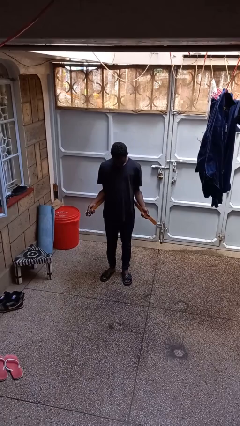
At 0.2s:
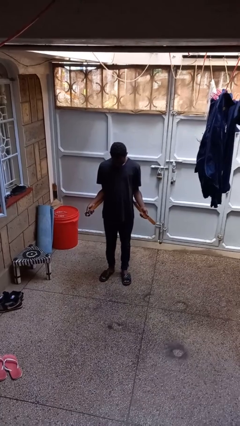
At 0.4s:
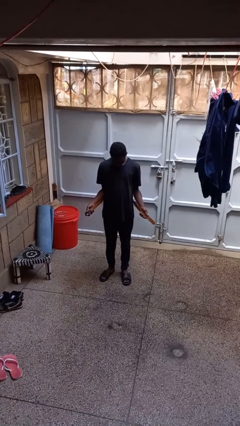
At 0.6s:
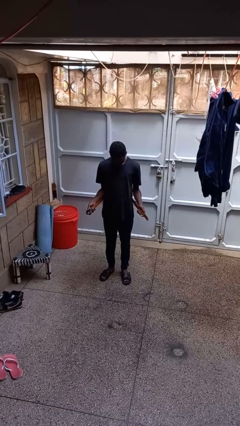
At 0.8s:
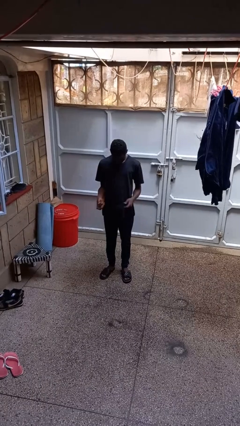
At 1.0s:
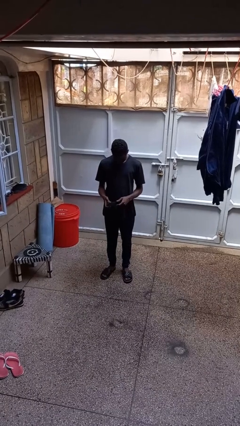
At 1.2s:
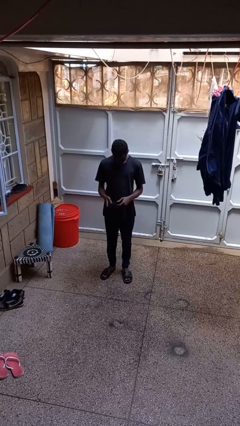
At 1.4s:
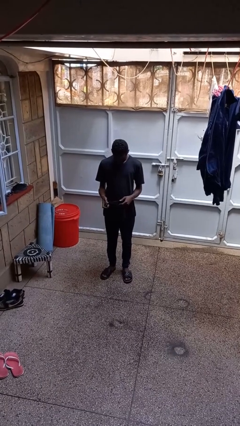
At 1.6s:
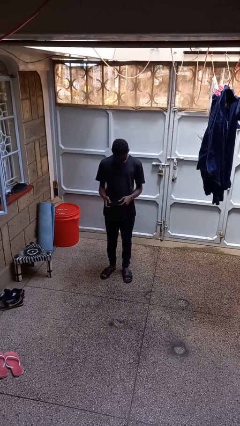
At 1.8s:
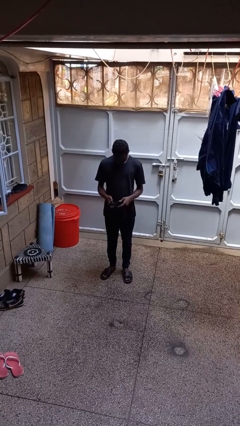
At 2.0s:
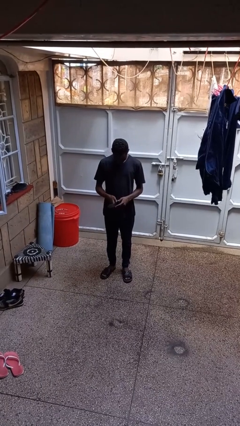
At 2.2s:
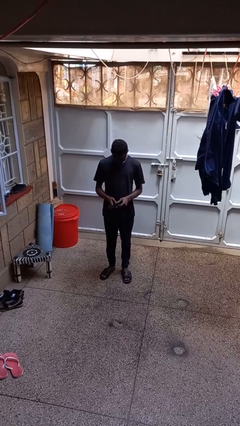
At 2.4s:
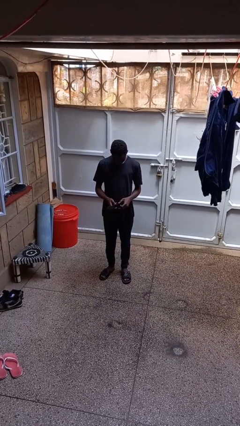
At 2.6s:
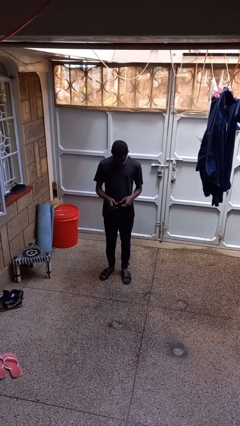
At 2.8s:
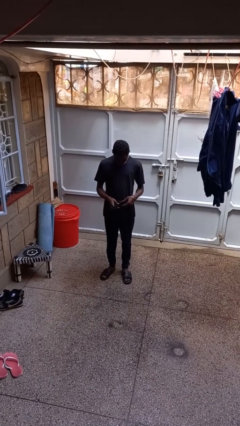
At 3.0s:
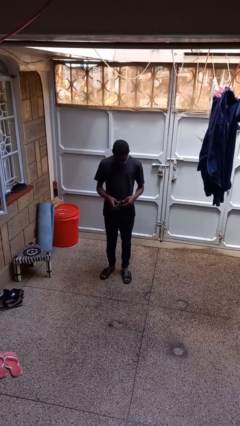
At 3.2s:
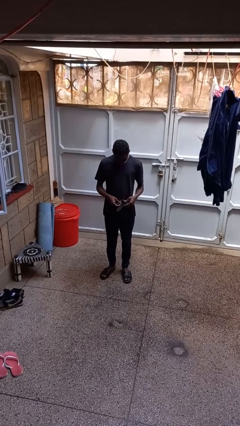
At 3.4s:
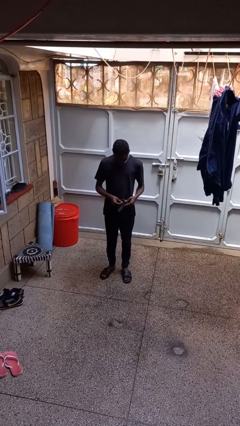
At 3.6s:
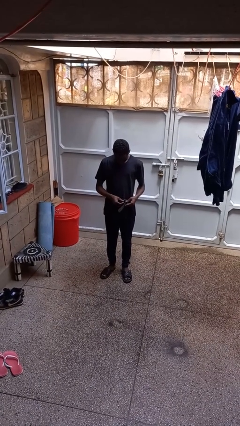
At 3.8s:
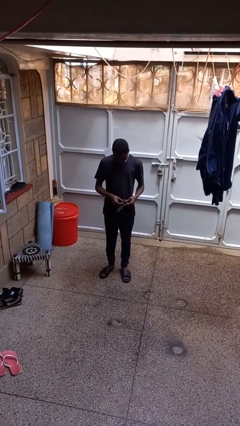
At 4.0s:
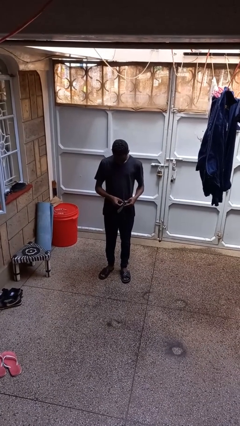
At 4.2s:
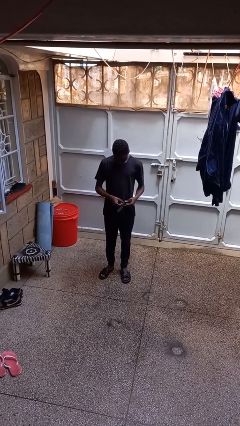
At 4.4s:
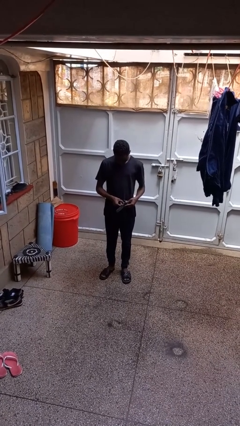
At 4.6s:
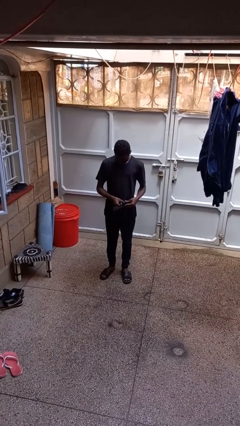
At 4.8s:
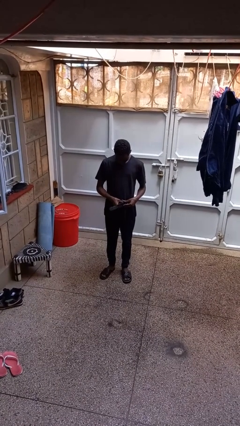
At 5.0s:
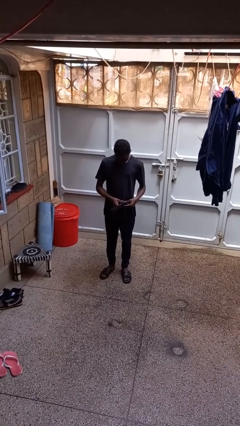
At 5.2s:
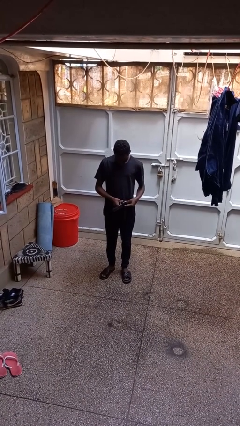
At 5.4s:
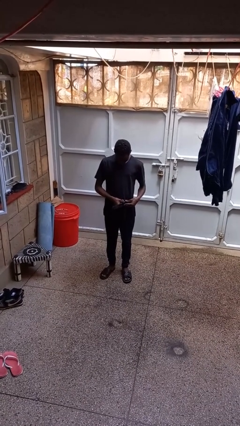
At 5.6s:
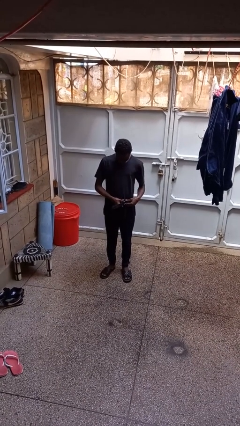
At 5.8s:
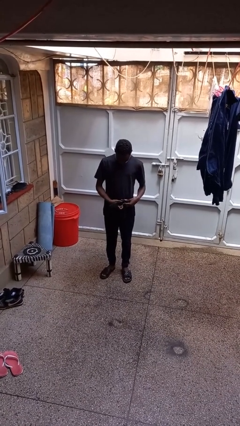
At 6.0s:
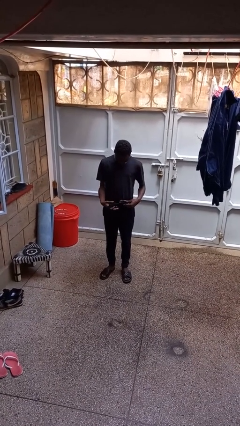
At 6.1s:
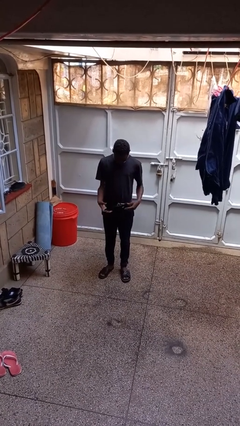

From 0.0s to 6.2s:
person puts on belt

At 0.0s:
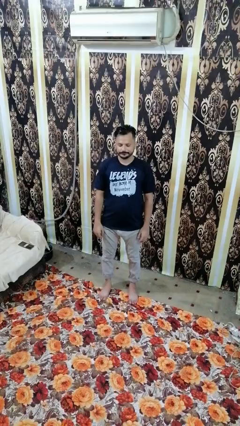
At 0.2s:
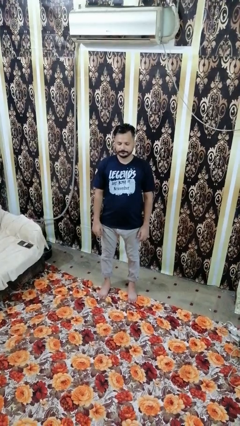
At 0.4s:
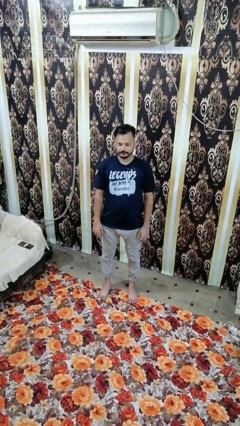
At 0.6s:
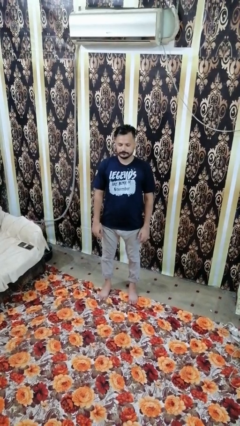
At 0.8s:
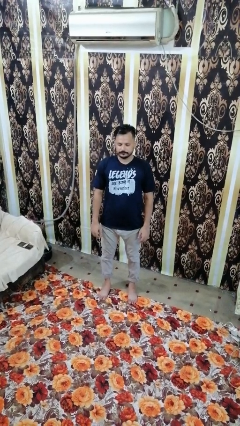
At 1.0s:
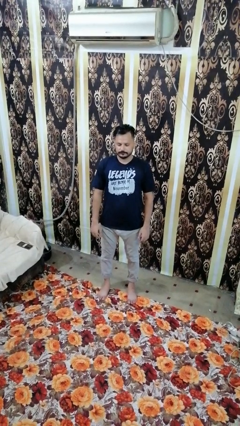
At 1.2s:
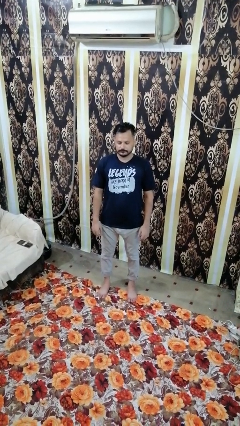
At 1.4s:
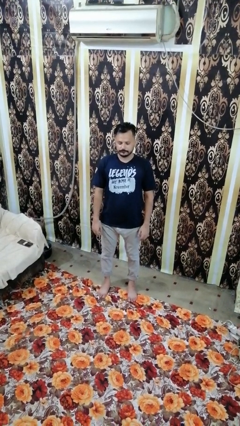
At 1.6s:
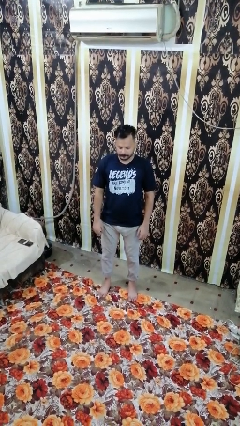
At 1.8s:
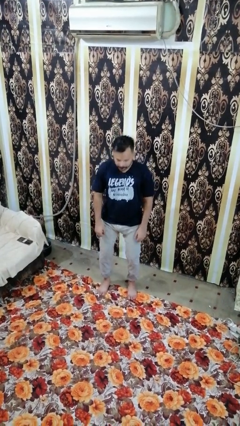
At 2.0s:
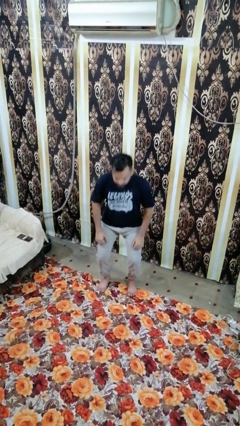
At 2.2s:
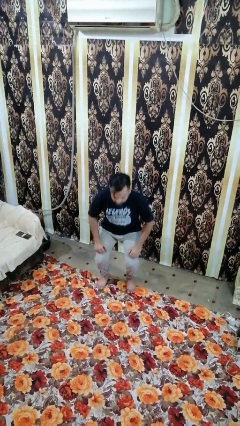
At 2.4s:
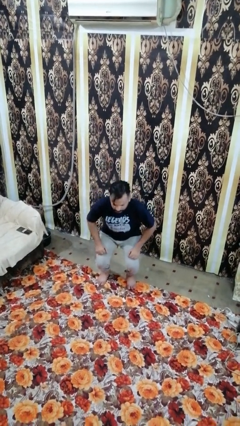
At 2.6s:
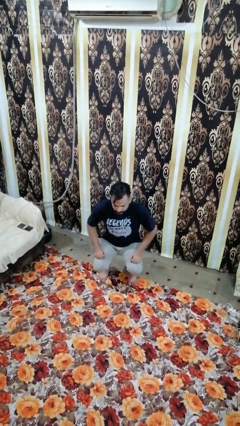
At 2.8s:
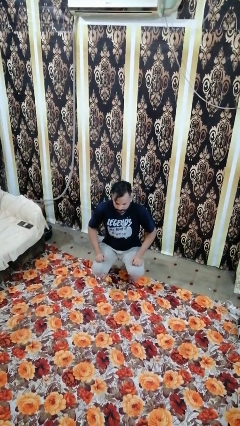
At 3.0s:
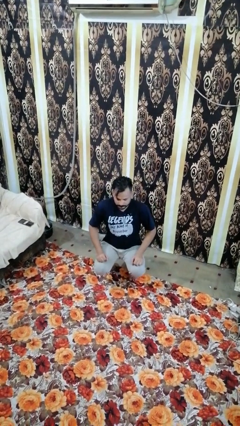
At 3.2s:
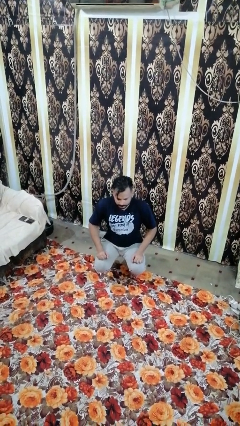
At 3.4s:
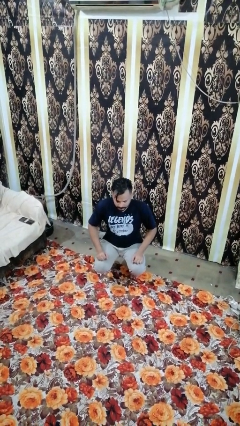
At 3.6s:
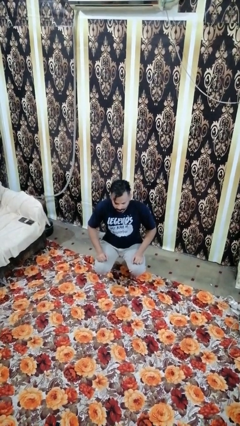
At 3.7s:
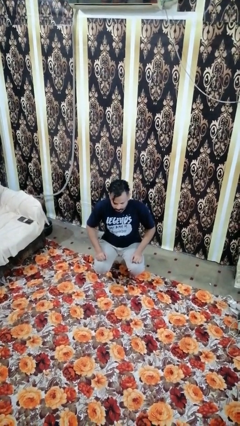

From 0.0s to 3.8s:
person squats

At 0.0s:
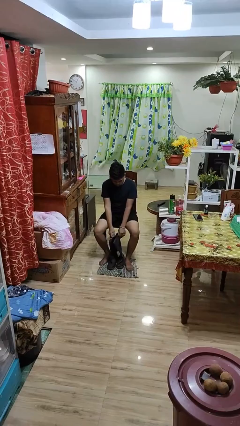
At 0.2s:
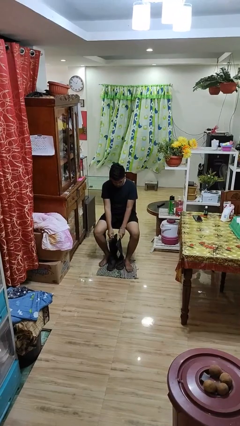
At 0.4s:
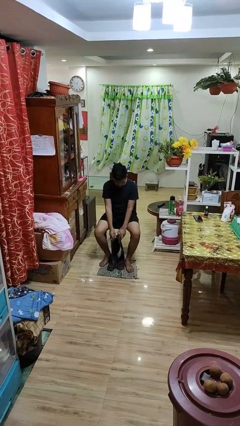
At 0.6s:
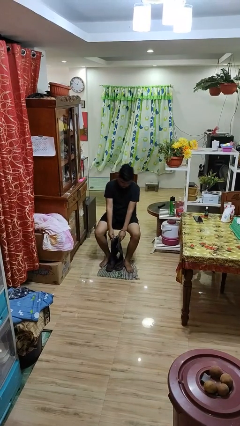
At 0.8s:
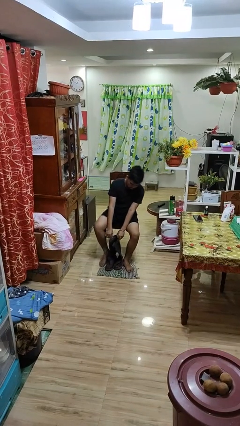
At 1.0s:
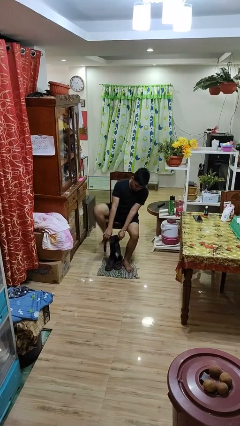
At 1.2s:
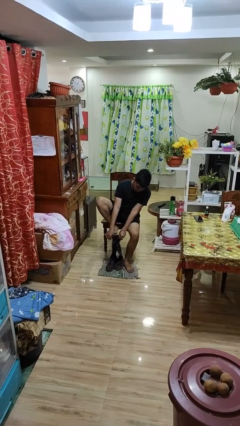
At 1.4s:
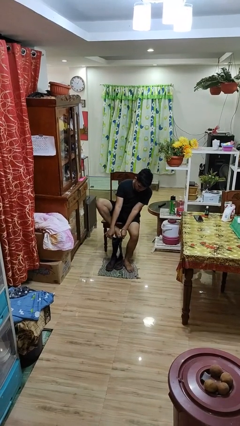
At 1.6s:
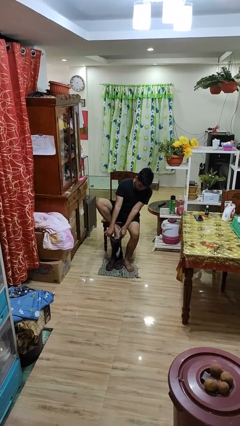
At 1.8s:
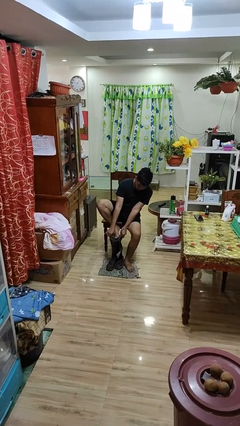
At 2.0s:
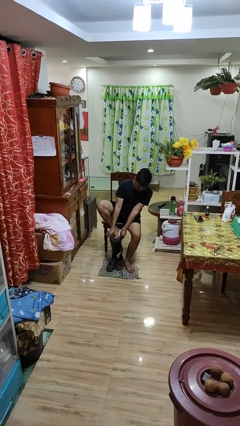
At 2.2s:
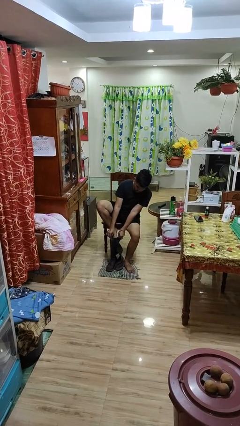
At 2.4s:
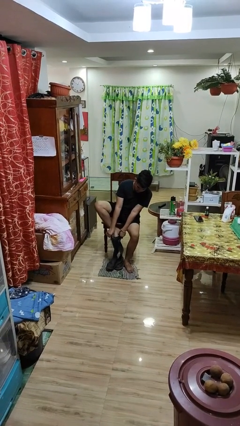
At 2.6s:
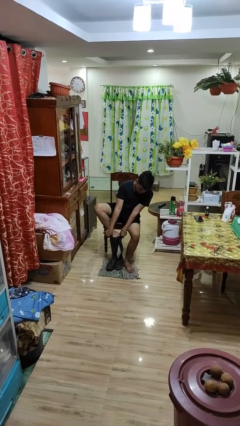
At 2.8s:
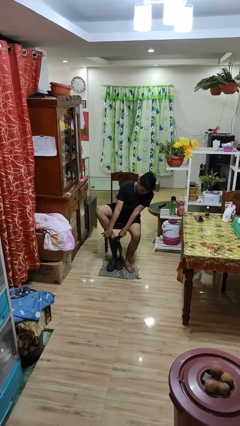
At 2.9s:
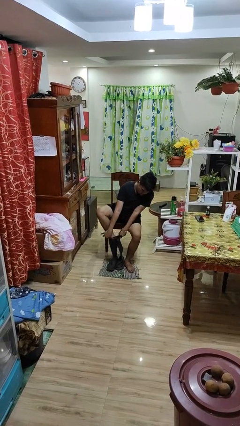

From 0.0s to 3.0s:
person uses television remote

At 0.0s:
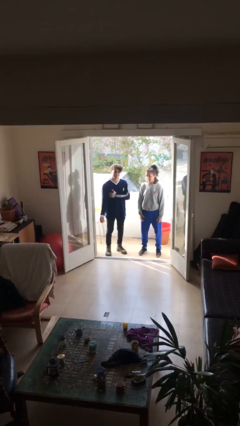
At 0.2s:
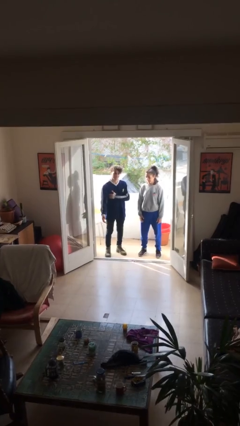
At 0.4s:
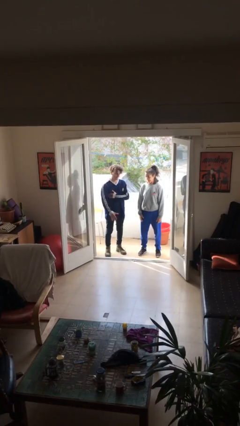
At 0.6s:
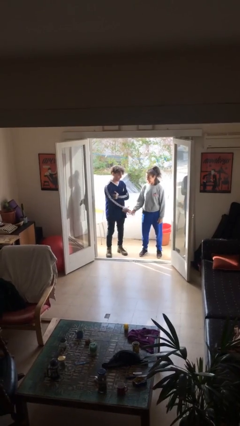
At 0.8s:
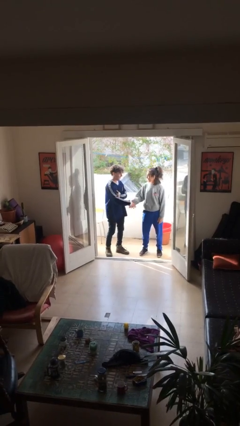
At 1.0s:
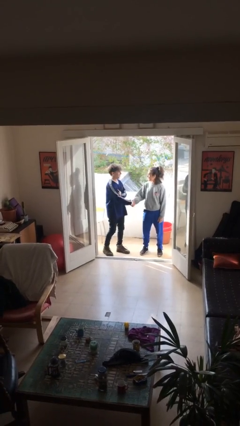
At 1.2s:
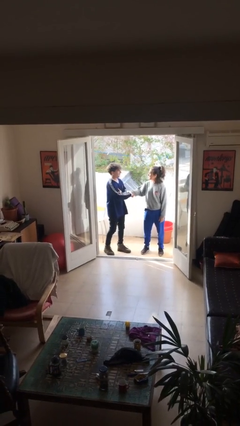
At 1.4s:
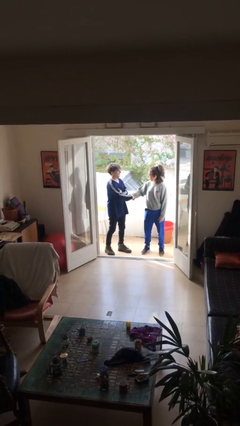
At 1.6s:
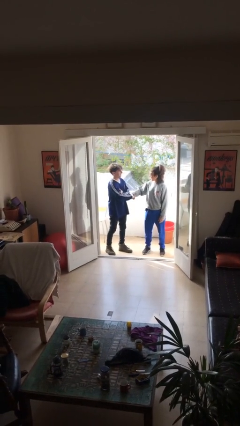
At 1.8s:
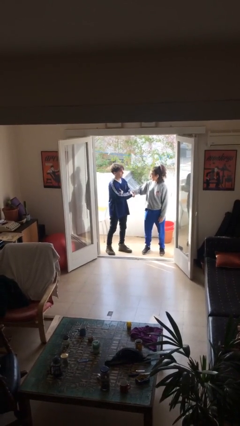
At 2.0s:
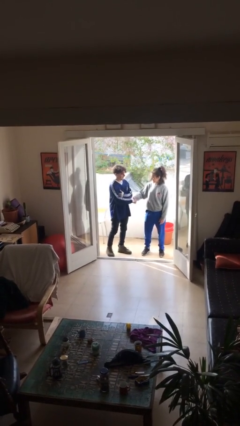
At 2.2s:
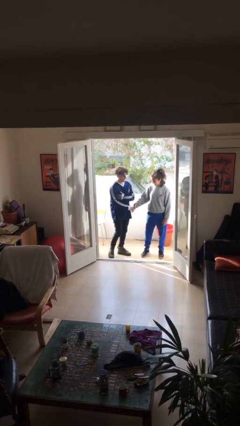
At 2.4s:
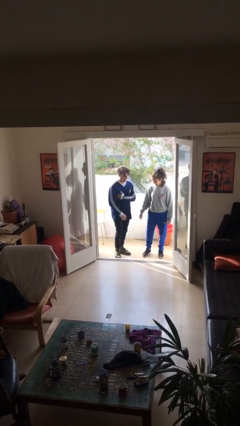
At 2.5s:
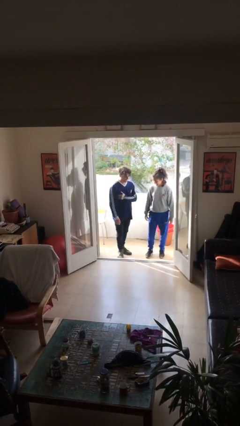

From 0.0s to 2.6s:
person shakes hand

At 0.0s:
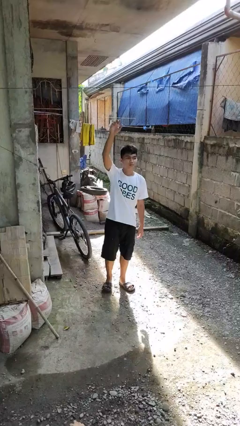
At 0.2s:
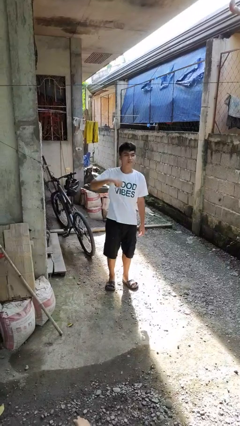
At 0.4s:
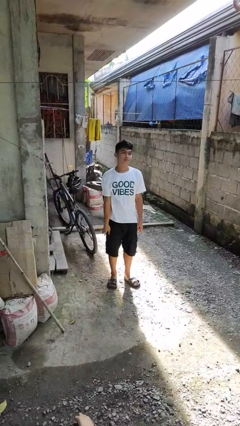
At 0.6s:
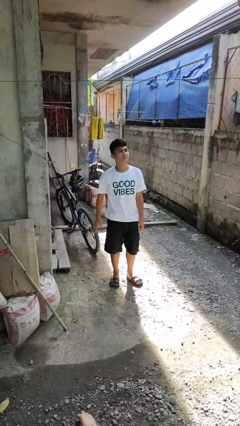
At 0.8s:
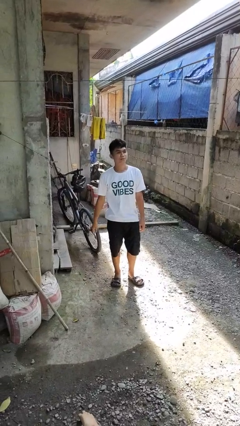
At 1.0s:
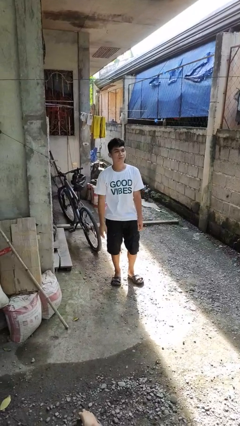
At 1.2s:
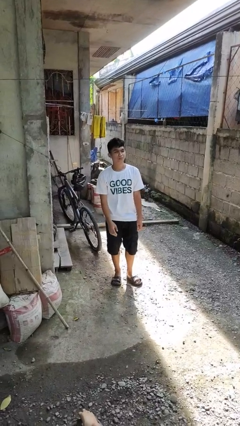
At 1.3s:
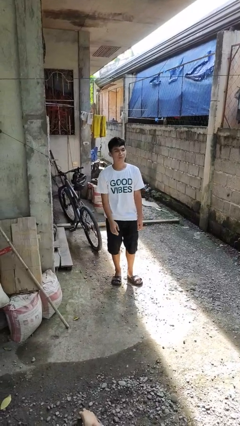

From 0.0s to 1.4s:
person gestures lower hand

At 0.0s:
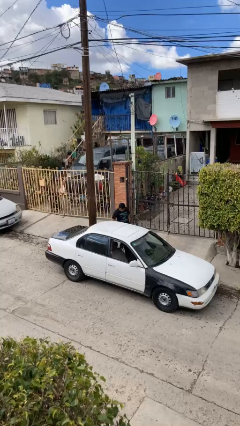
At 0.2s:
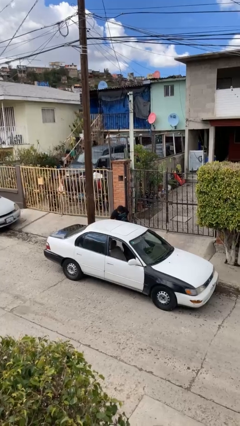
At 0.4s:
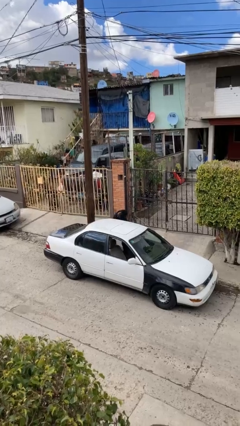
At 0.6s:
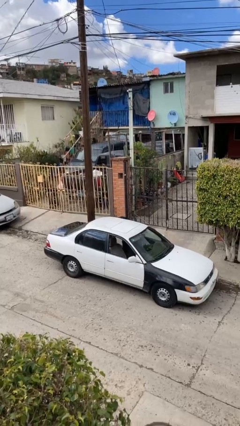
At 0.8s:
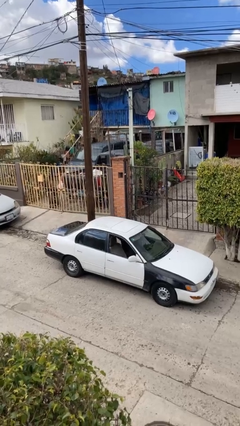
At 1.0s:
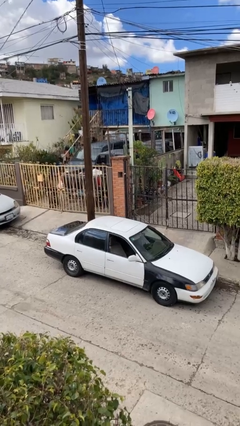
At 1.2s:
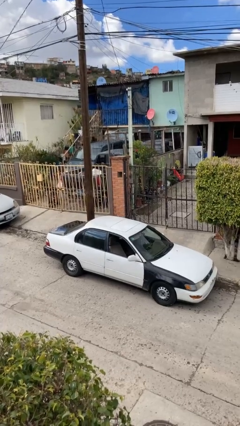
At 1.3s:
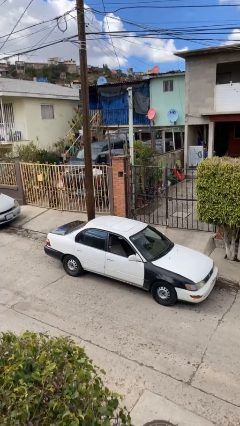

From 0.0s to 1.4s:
person enters car
